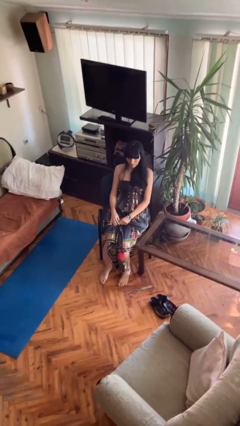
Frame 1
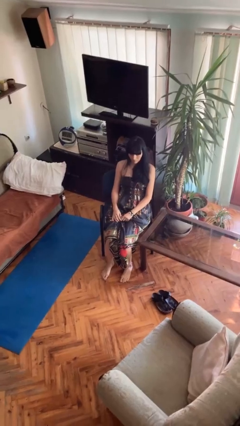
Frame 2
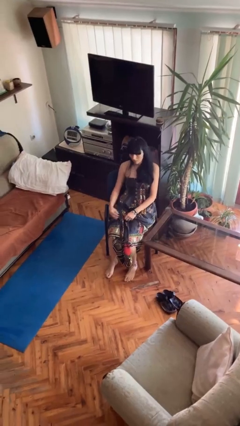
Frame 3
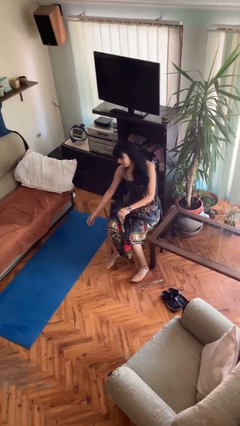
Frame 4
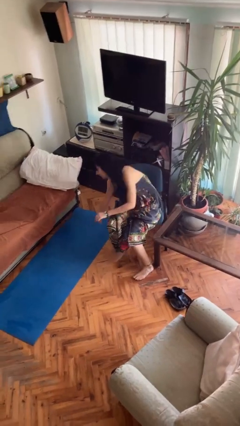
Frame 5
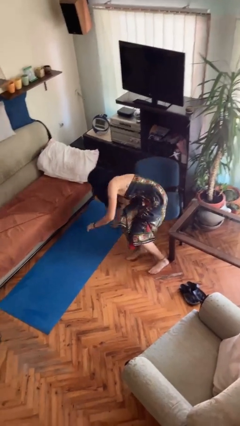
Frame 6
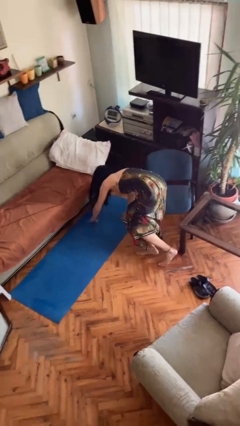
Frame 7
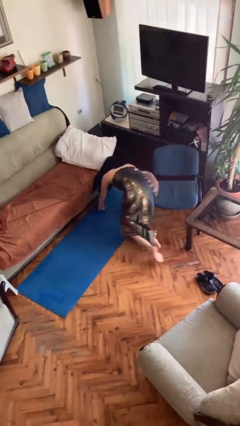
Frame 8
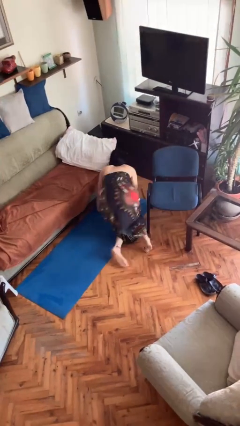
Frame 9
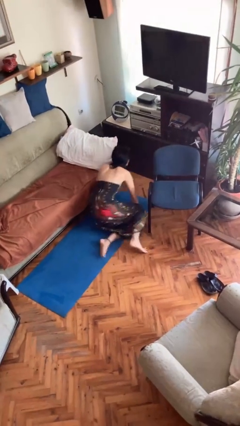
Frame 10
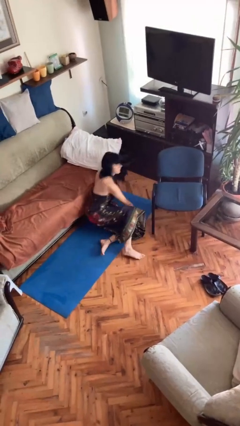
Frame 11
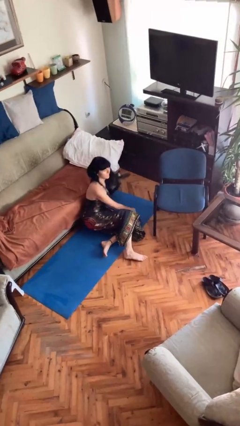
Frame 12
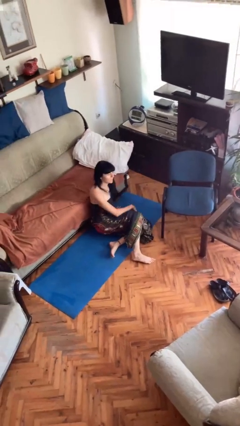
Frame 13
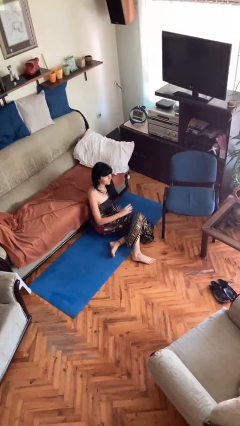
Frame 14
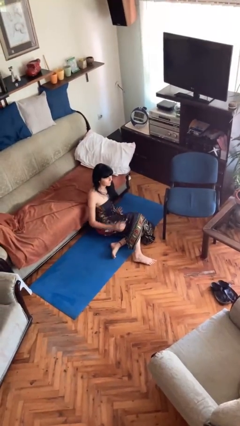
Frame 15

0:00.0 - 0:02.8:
person falls from chair

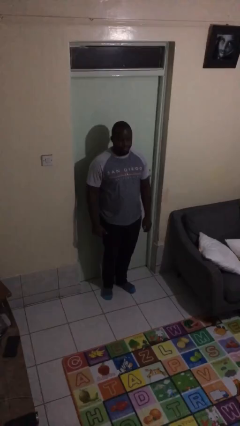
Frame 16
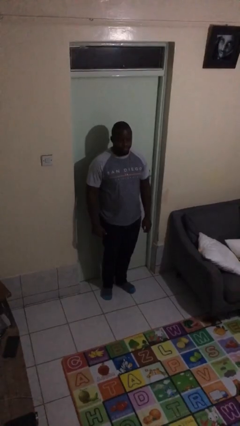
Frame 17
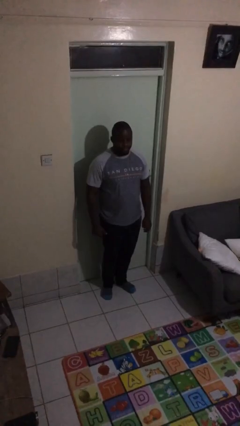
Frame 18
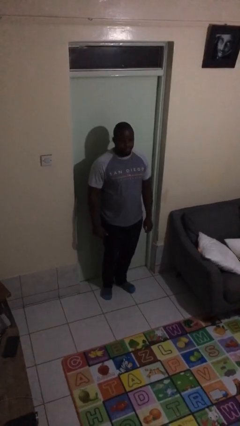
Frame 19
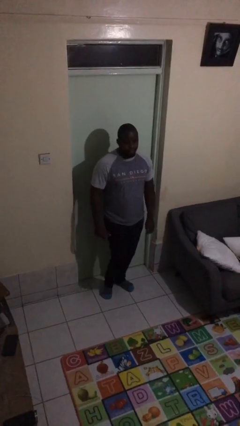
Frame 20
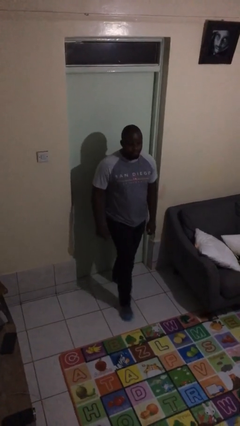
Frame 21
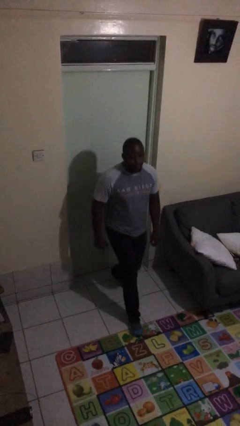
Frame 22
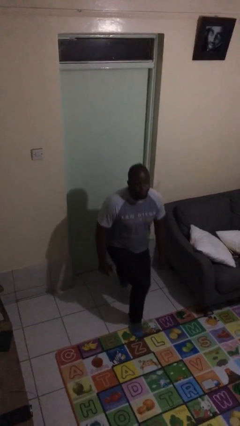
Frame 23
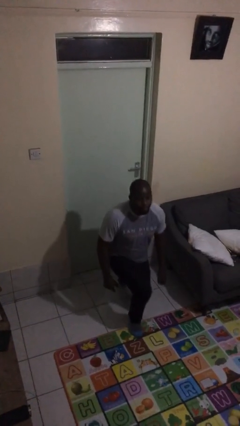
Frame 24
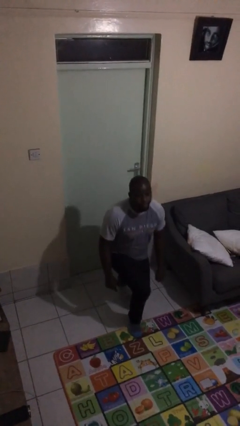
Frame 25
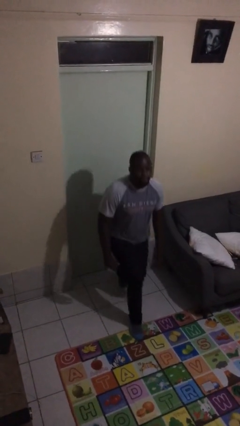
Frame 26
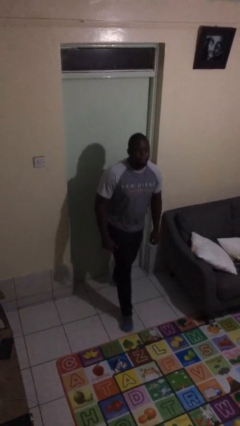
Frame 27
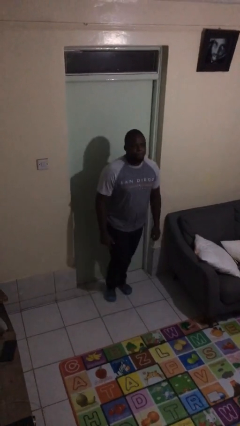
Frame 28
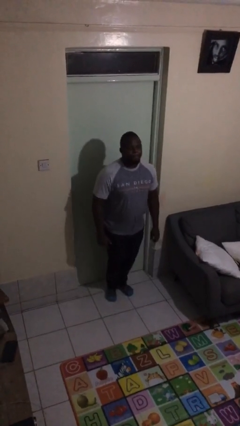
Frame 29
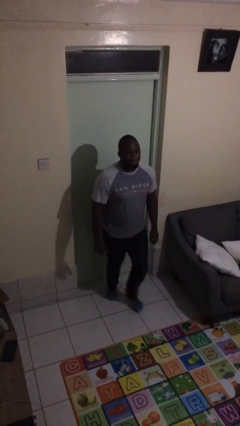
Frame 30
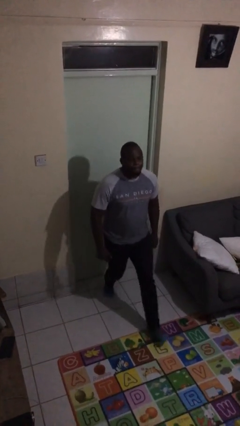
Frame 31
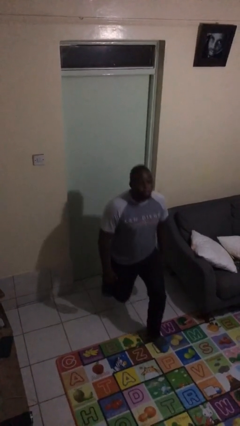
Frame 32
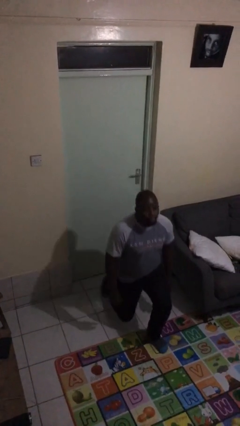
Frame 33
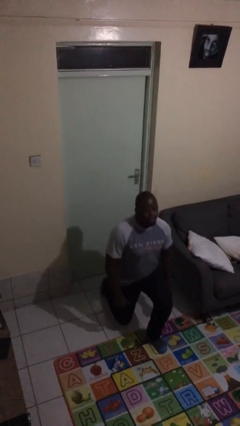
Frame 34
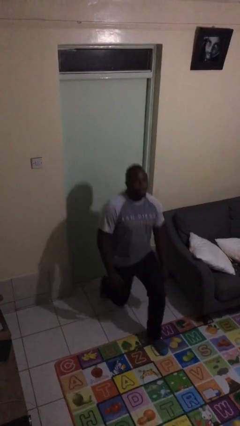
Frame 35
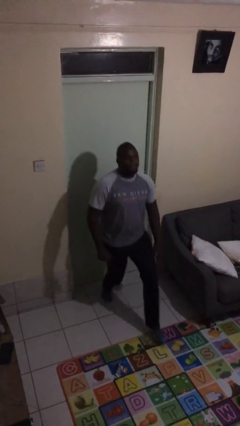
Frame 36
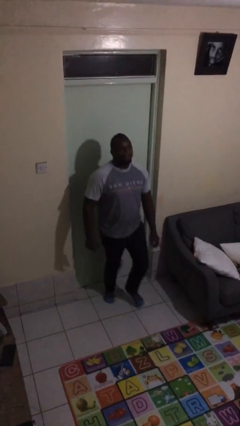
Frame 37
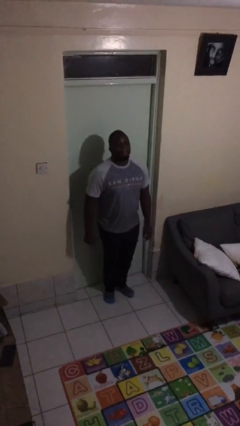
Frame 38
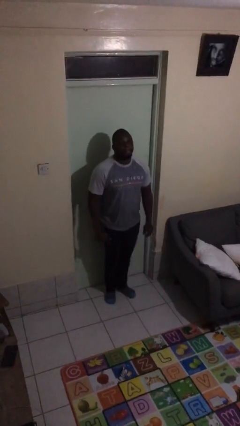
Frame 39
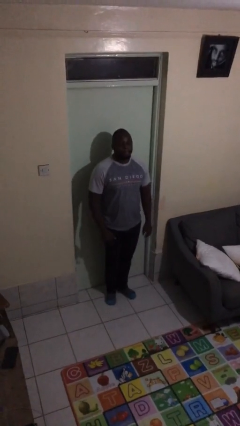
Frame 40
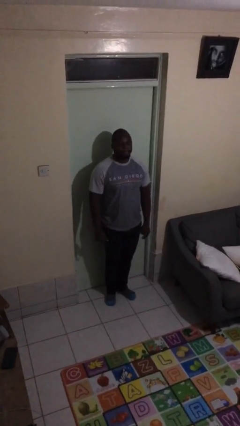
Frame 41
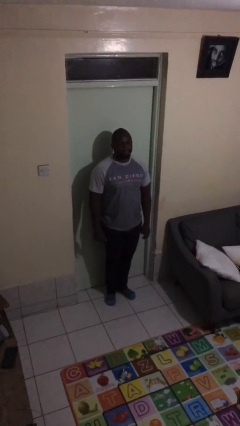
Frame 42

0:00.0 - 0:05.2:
person exercises with lunges

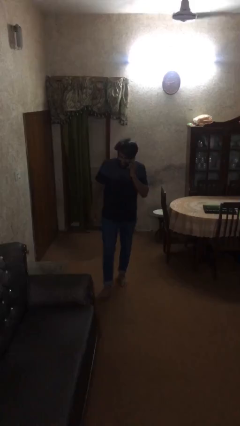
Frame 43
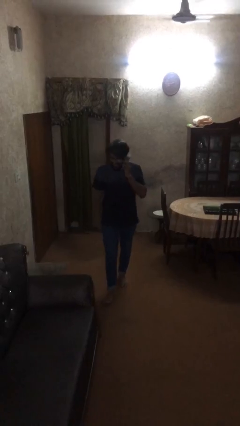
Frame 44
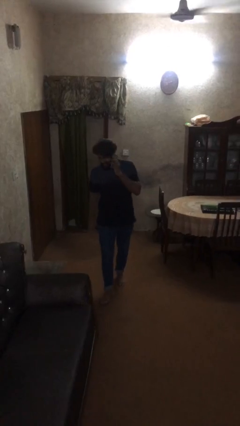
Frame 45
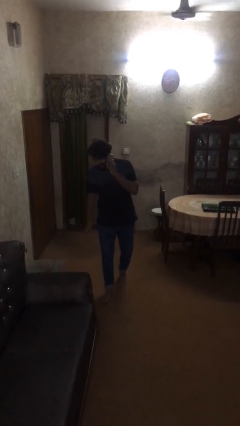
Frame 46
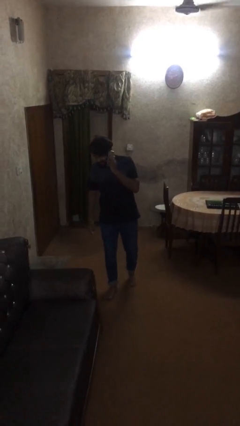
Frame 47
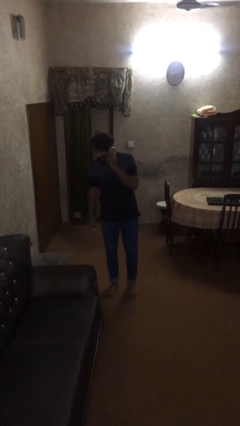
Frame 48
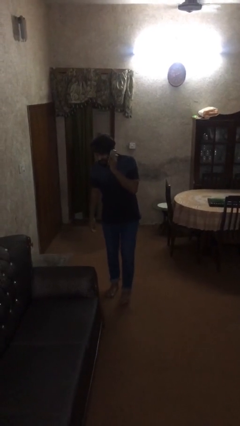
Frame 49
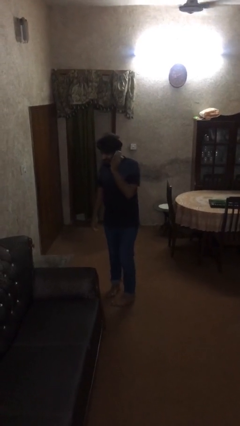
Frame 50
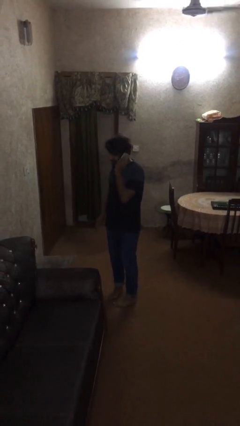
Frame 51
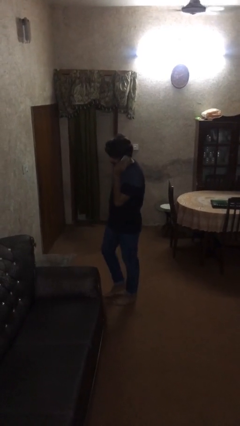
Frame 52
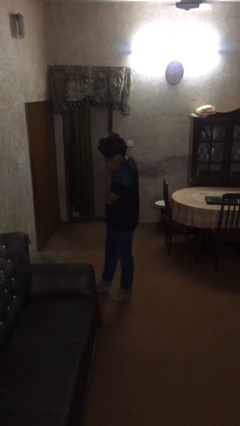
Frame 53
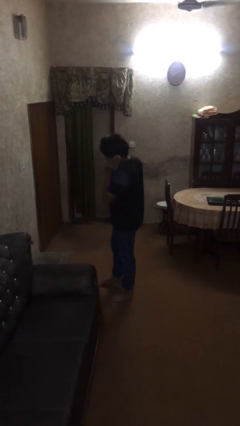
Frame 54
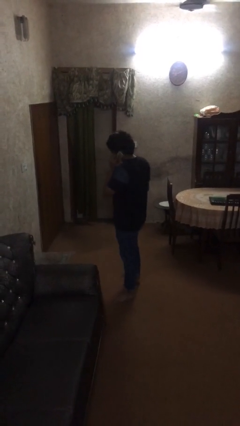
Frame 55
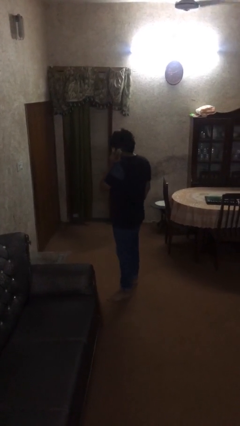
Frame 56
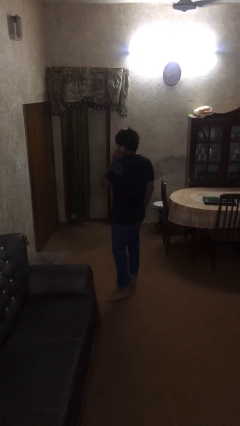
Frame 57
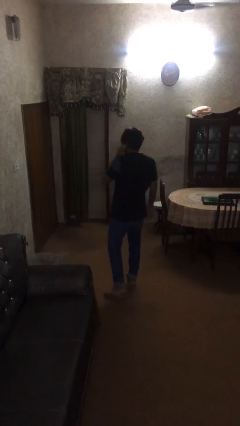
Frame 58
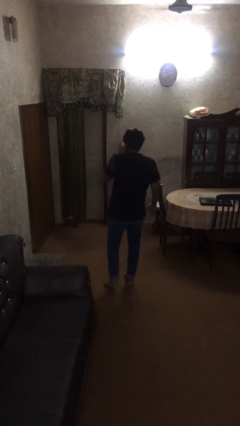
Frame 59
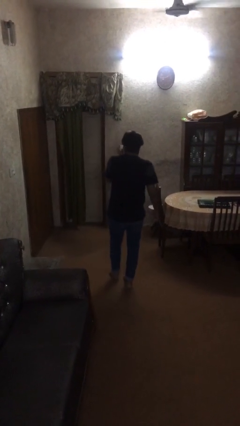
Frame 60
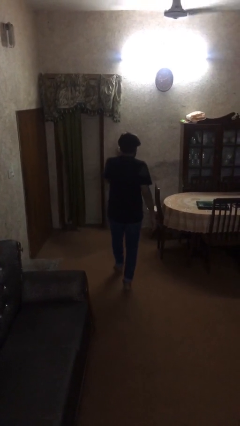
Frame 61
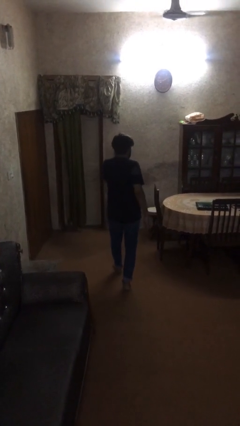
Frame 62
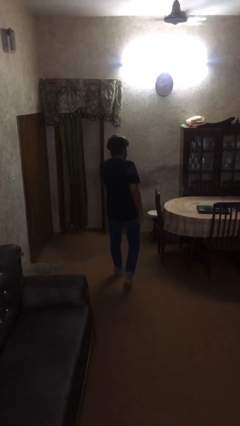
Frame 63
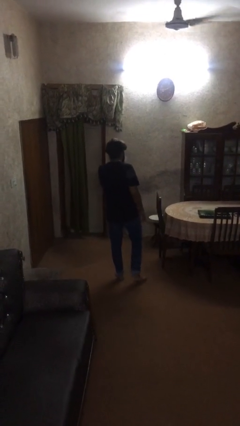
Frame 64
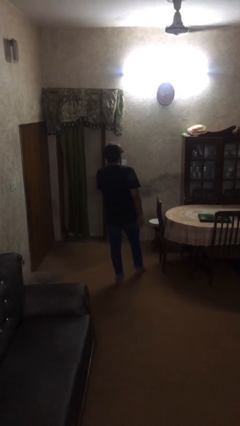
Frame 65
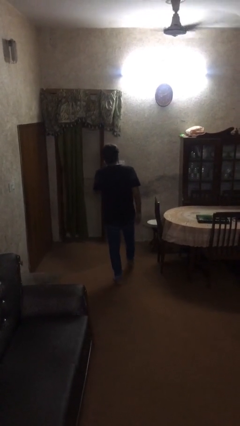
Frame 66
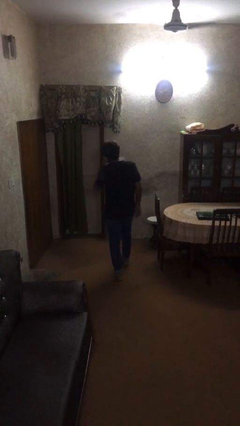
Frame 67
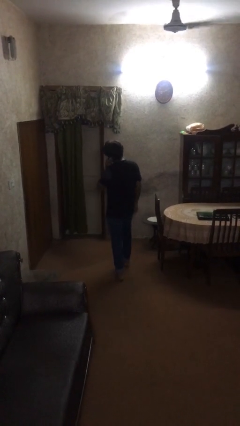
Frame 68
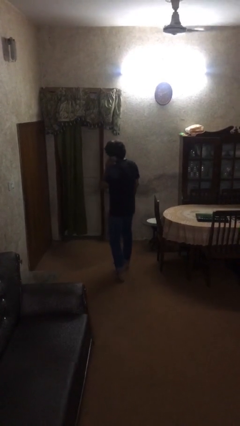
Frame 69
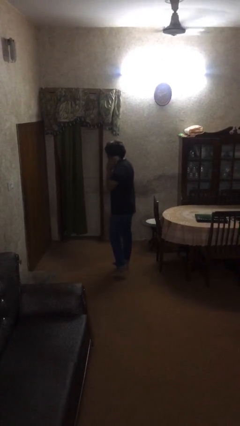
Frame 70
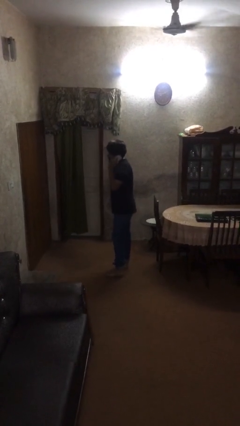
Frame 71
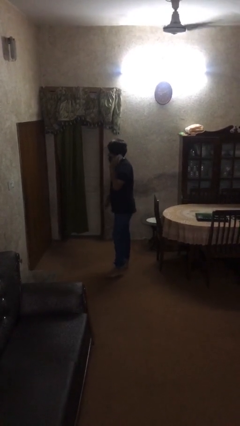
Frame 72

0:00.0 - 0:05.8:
person talks on phone

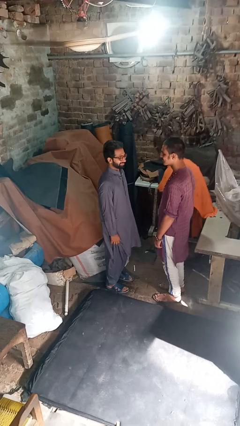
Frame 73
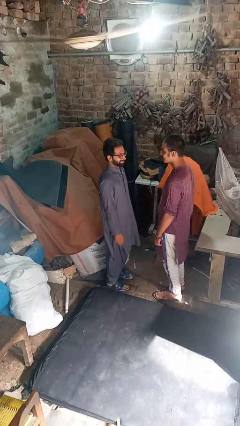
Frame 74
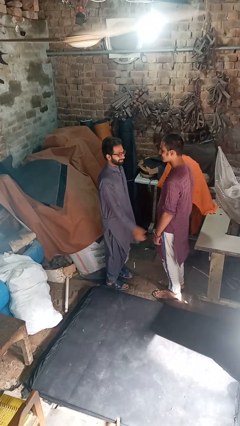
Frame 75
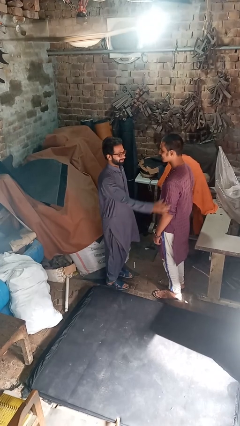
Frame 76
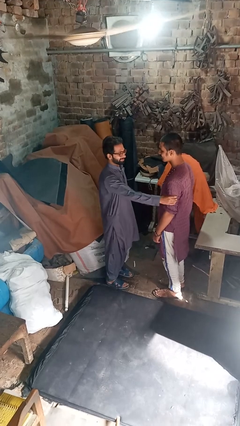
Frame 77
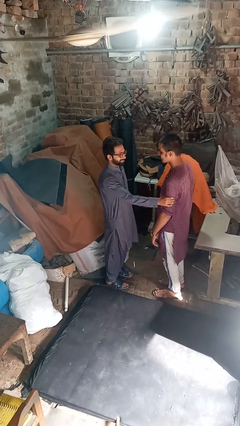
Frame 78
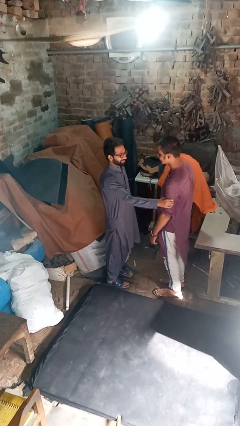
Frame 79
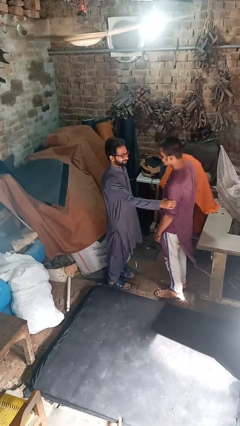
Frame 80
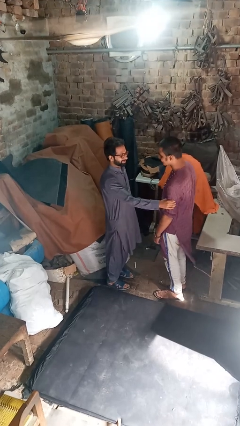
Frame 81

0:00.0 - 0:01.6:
person grabs person by forearm

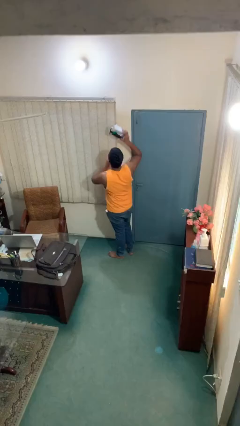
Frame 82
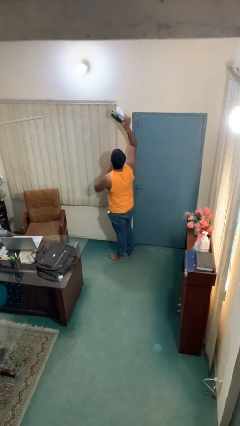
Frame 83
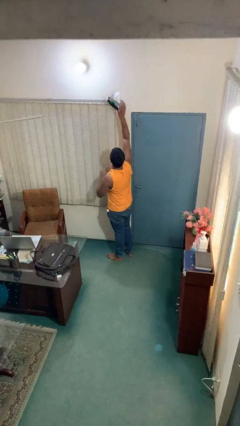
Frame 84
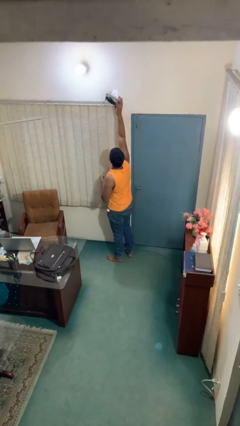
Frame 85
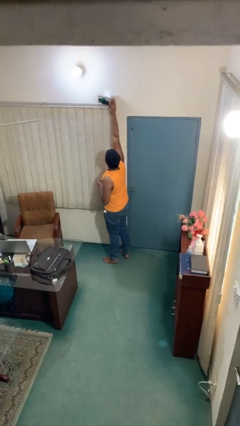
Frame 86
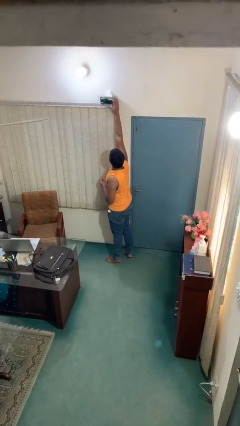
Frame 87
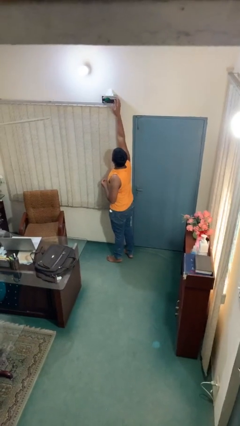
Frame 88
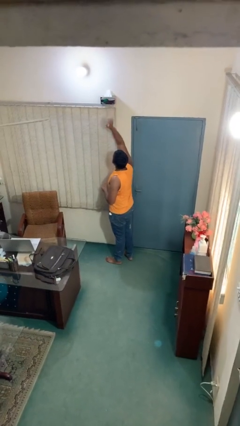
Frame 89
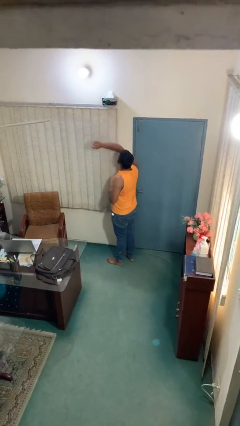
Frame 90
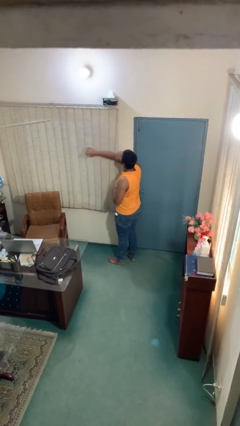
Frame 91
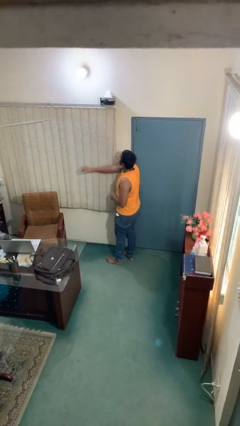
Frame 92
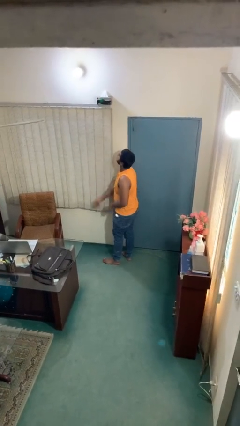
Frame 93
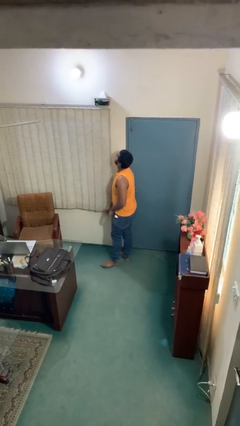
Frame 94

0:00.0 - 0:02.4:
person puts down object on shelf
